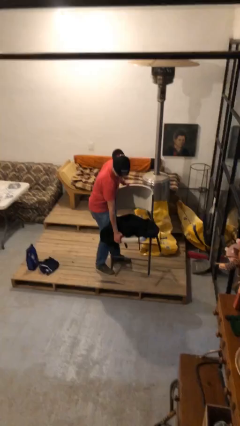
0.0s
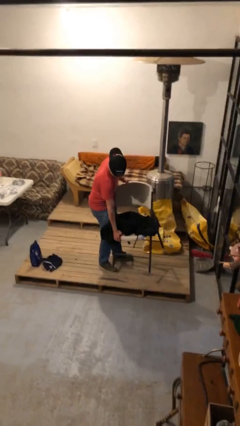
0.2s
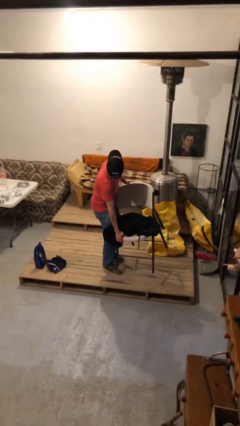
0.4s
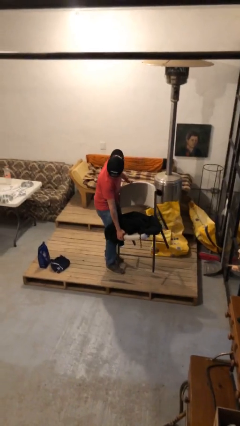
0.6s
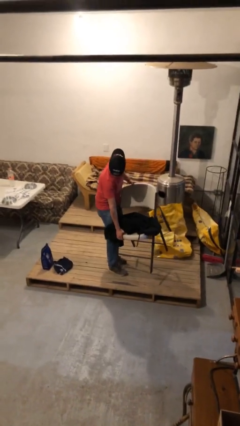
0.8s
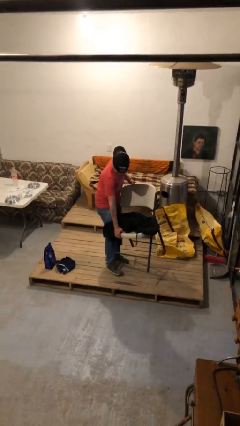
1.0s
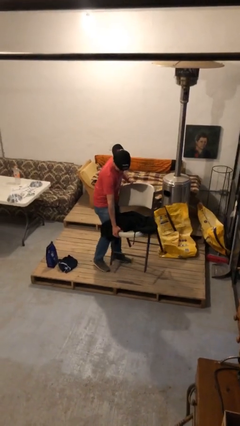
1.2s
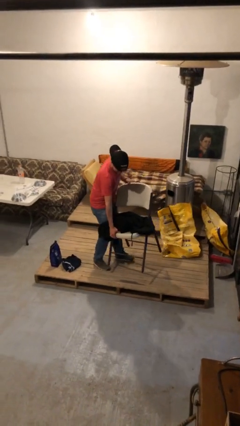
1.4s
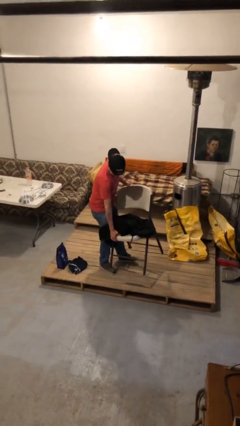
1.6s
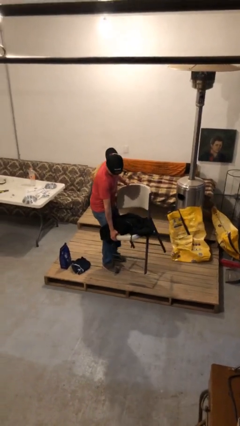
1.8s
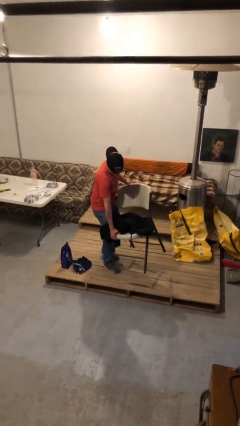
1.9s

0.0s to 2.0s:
person carries heavy object

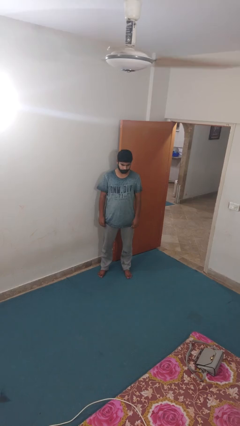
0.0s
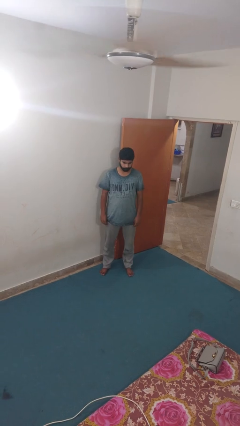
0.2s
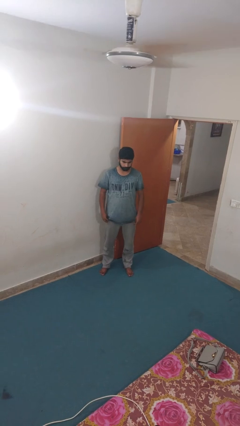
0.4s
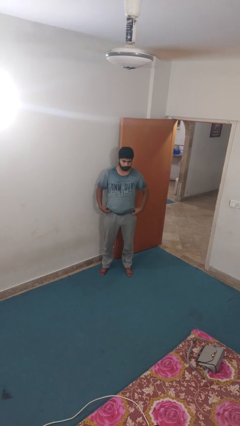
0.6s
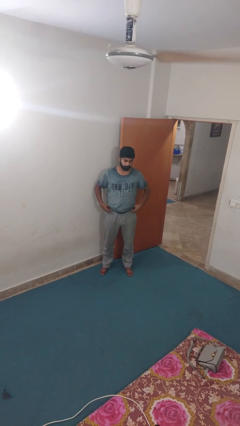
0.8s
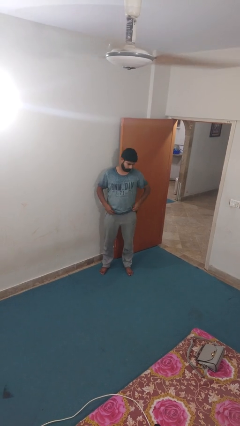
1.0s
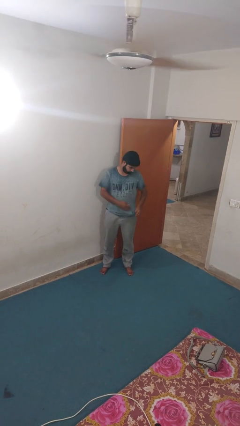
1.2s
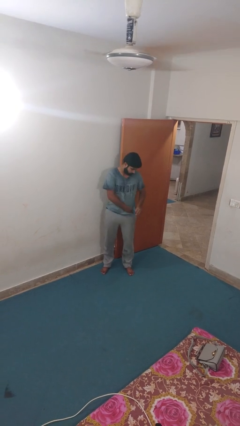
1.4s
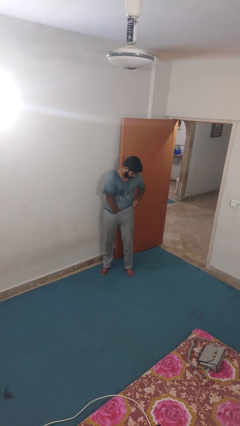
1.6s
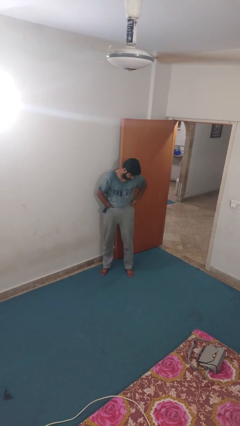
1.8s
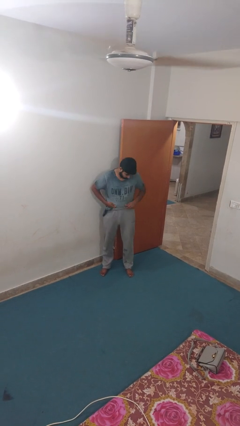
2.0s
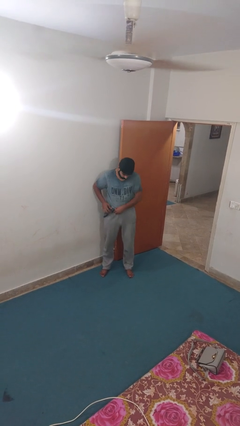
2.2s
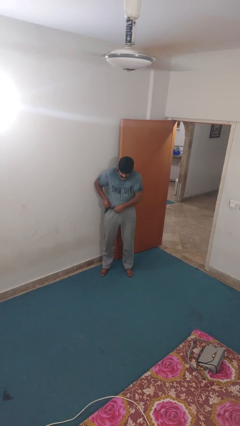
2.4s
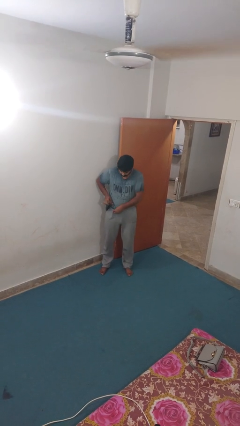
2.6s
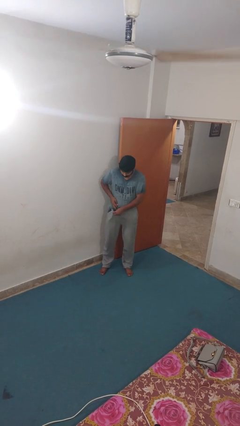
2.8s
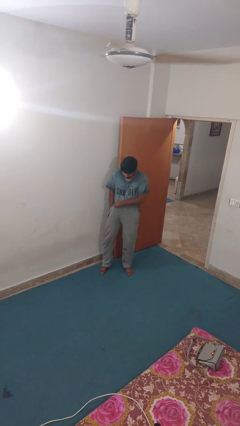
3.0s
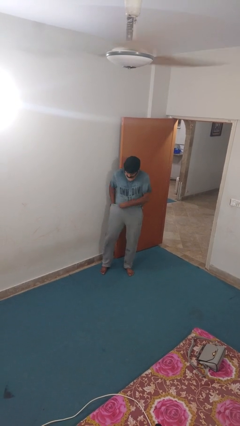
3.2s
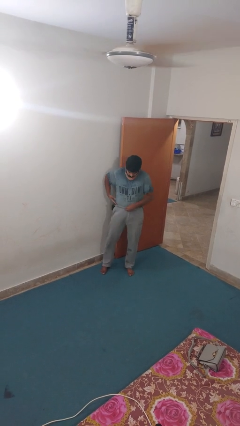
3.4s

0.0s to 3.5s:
person tucks in shirt

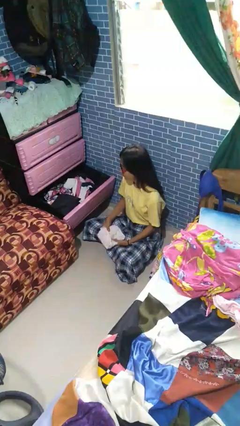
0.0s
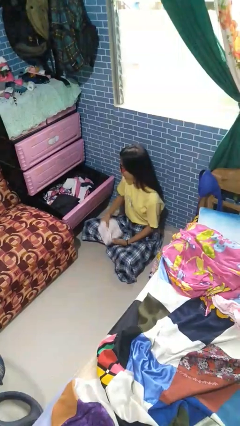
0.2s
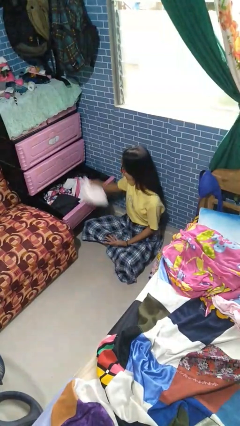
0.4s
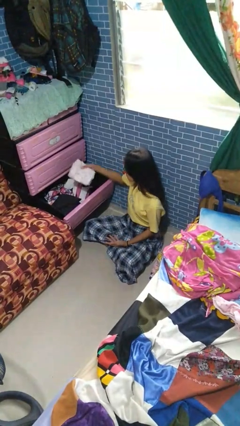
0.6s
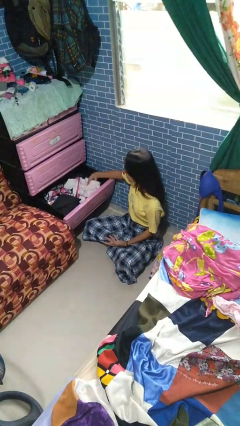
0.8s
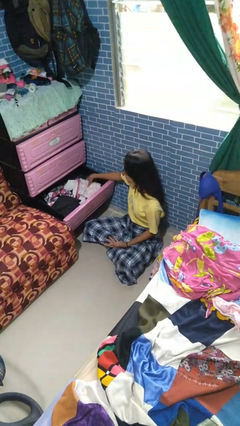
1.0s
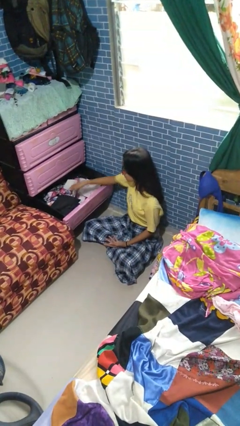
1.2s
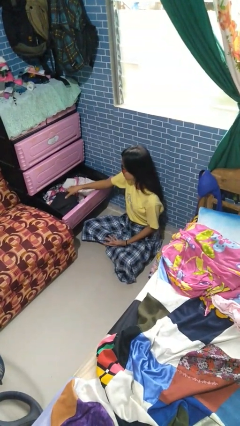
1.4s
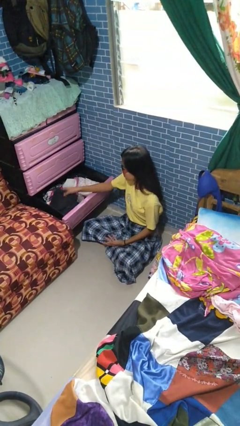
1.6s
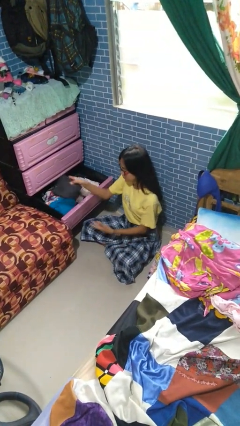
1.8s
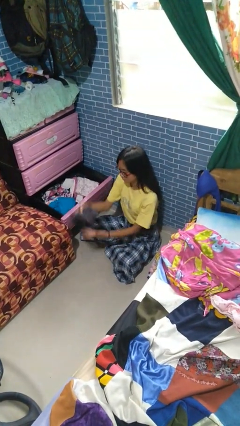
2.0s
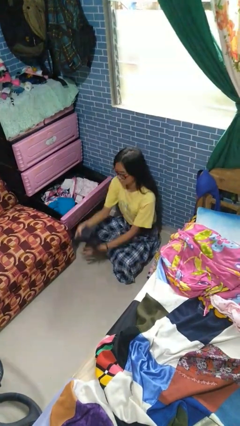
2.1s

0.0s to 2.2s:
person puts clothes into dresser

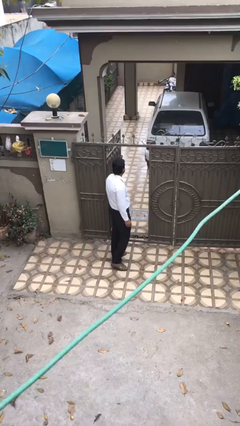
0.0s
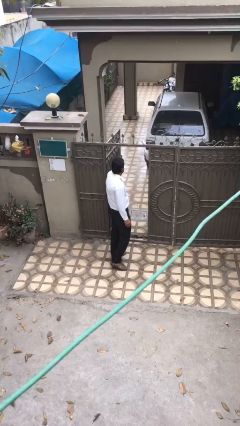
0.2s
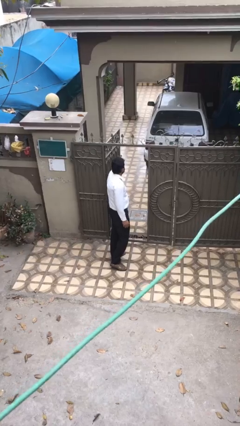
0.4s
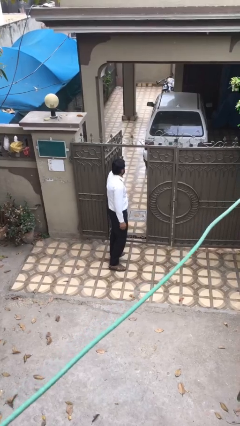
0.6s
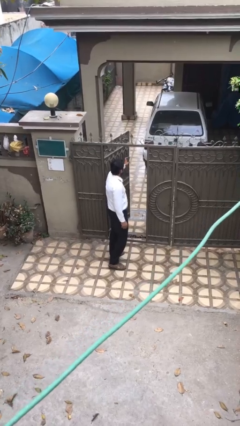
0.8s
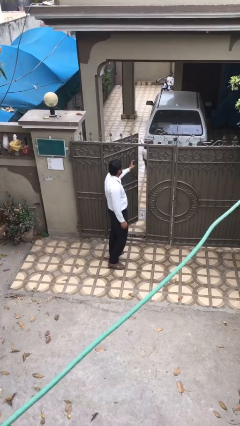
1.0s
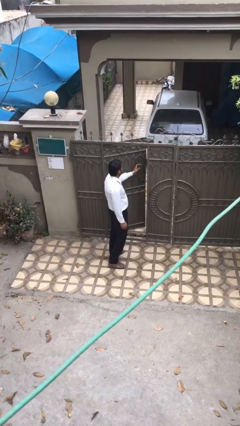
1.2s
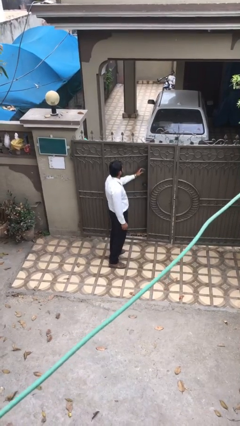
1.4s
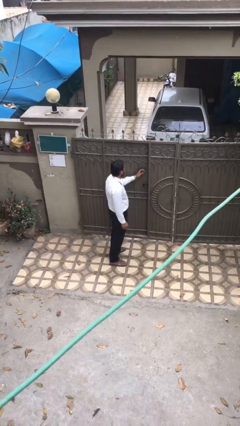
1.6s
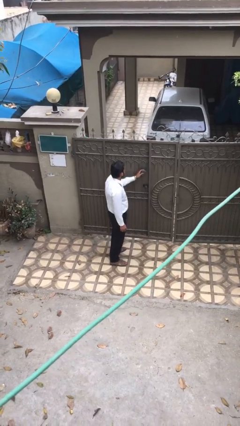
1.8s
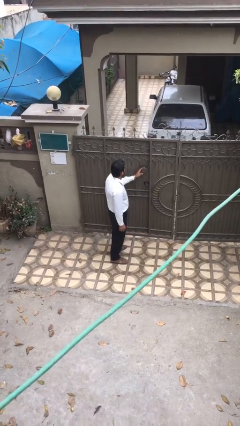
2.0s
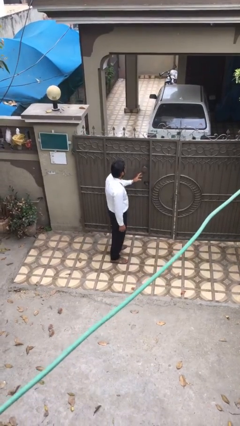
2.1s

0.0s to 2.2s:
person closes facility door

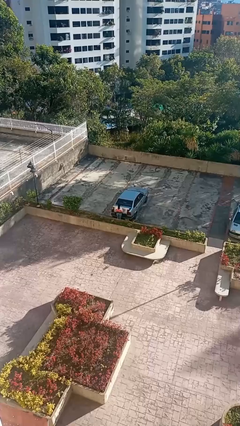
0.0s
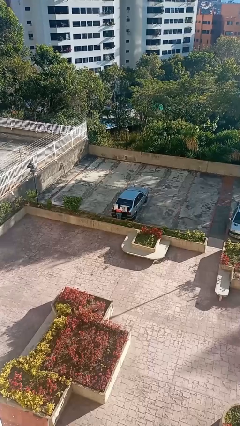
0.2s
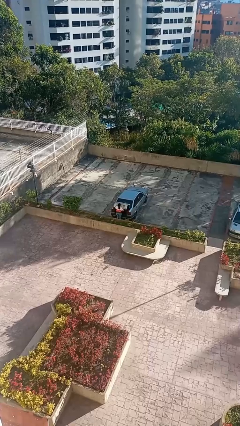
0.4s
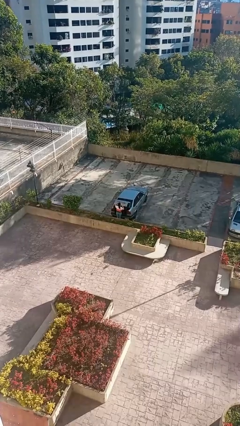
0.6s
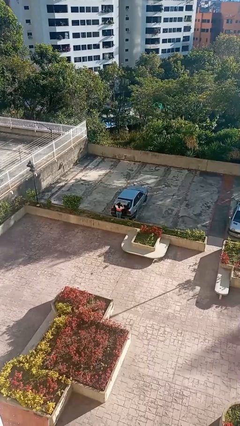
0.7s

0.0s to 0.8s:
person opens car trunk

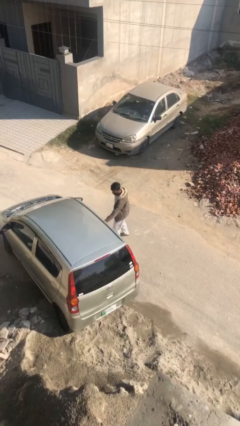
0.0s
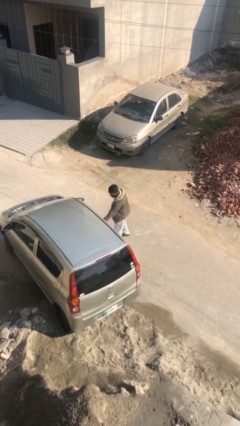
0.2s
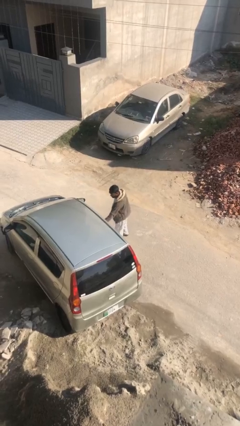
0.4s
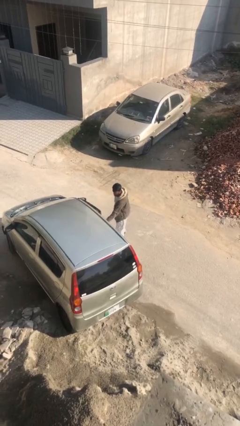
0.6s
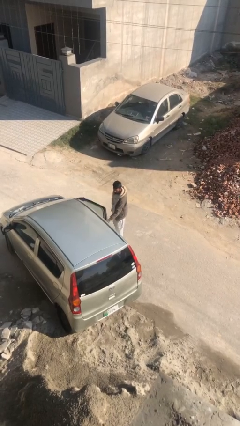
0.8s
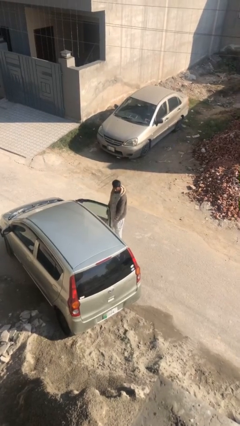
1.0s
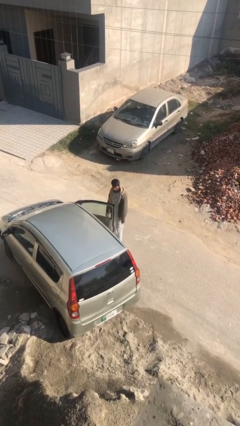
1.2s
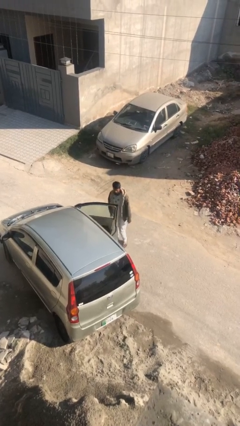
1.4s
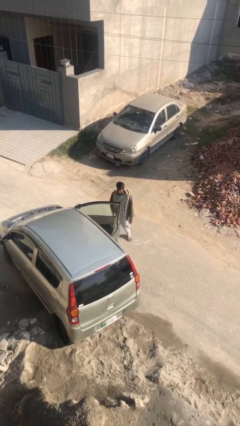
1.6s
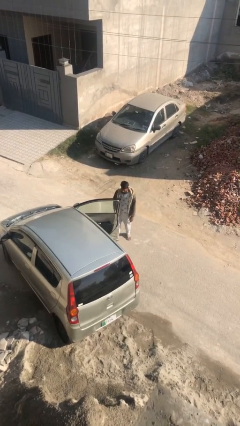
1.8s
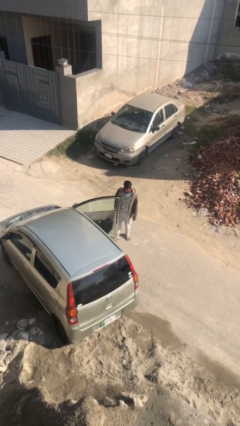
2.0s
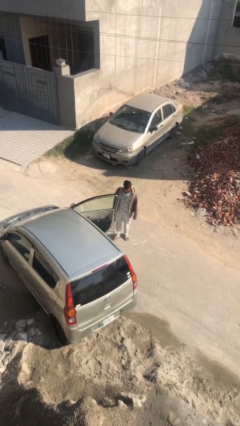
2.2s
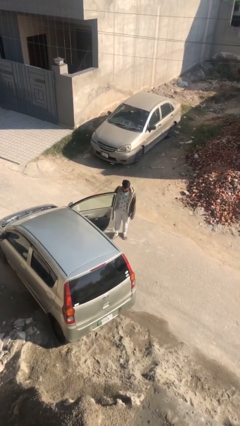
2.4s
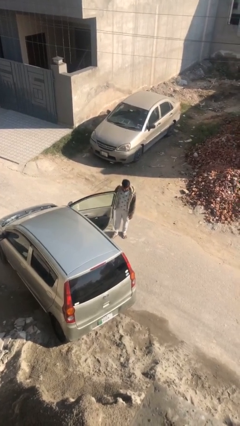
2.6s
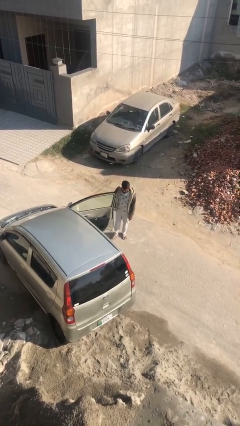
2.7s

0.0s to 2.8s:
person opens car door

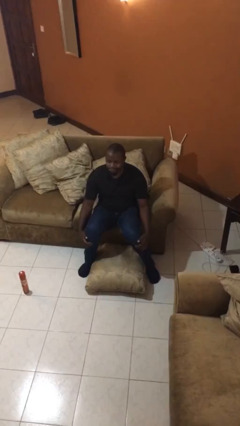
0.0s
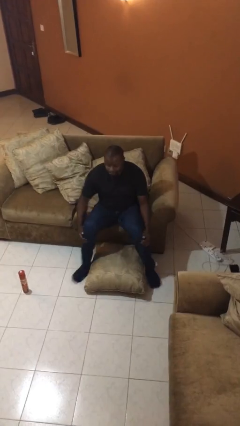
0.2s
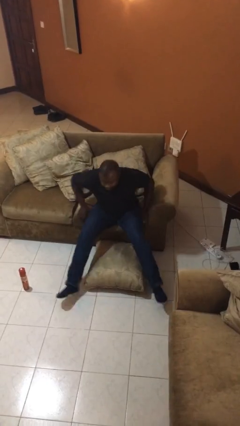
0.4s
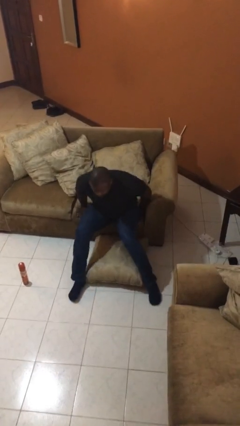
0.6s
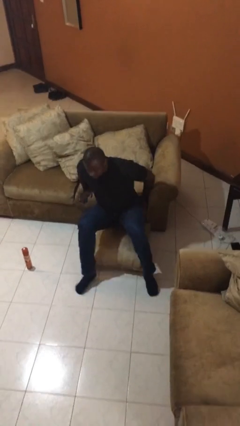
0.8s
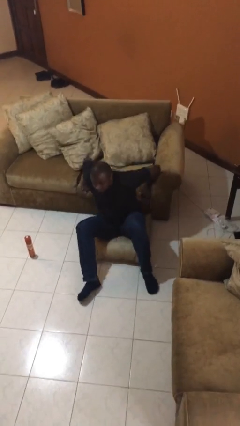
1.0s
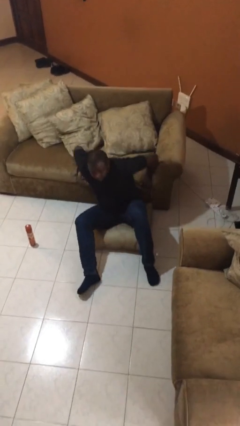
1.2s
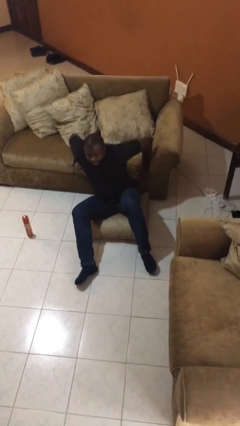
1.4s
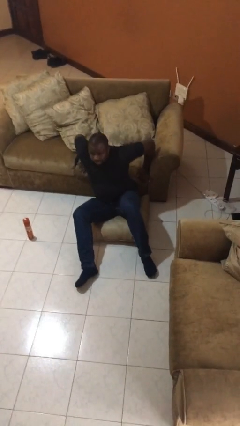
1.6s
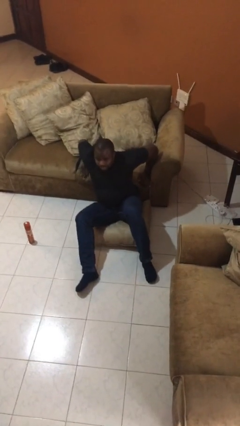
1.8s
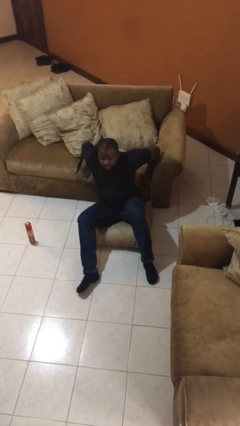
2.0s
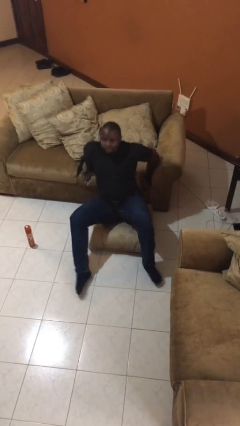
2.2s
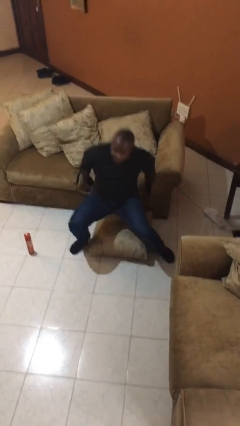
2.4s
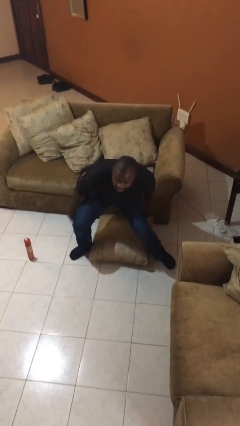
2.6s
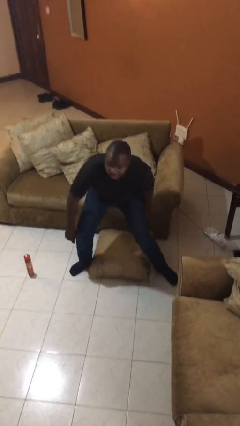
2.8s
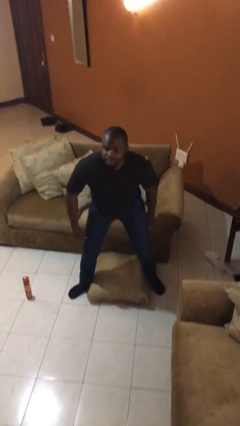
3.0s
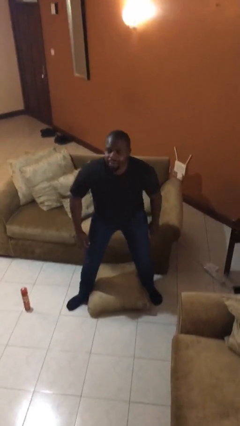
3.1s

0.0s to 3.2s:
person falls from chair

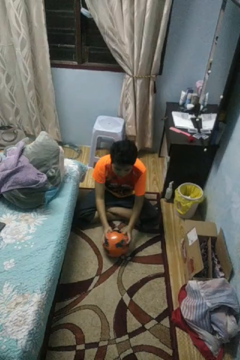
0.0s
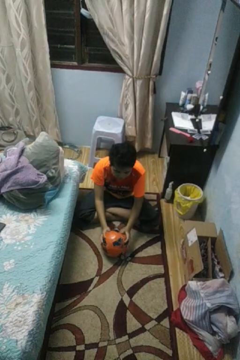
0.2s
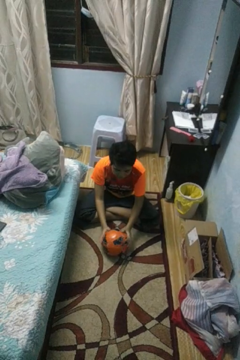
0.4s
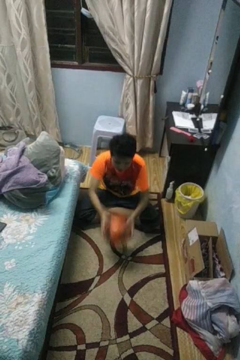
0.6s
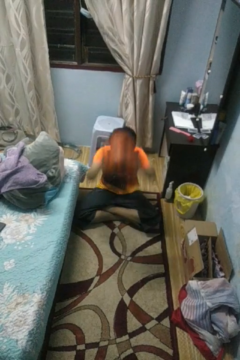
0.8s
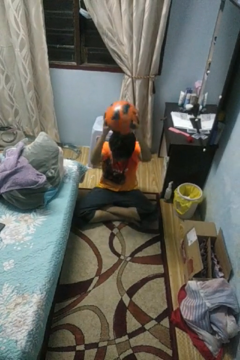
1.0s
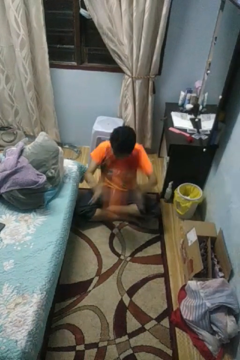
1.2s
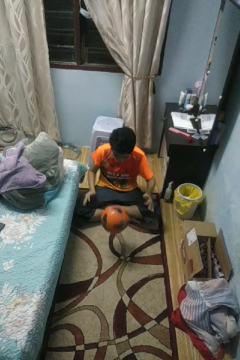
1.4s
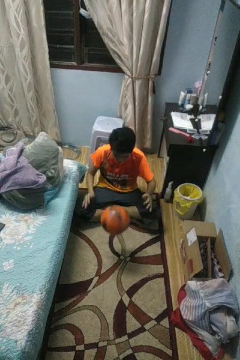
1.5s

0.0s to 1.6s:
person bounces ball on floor
